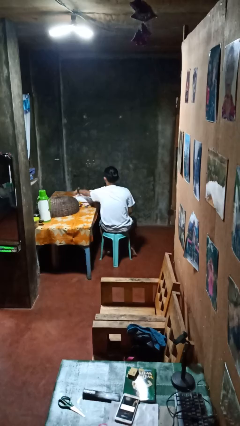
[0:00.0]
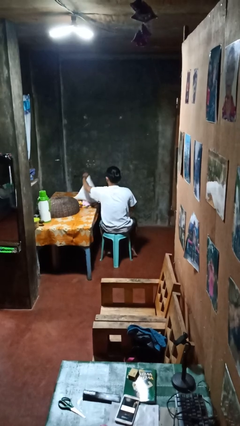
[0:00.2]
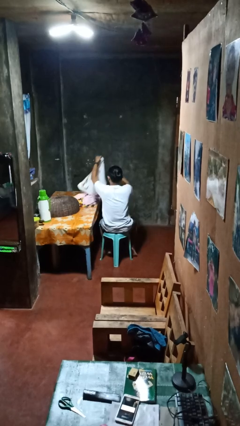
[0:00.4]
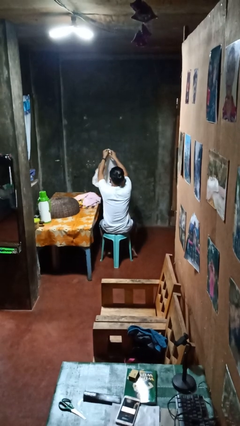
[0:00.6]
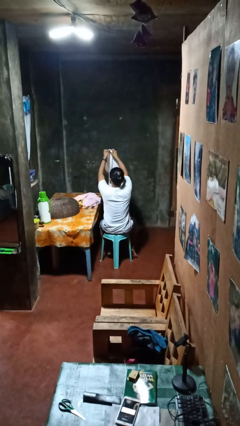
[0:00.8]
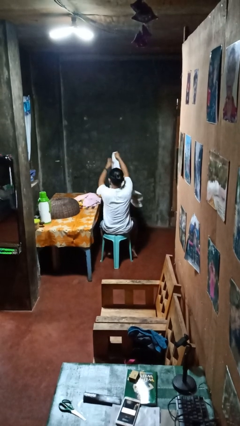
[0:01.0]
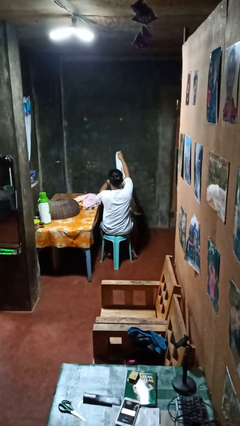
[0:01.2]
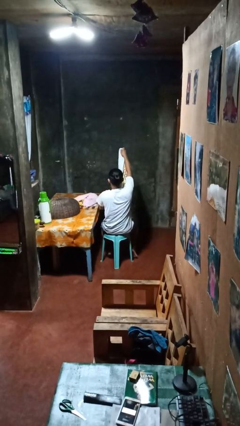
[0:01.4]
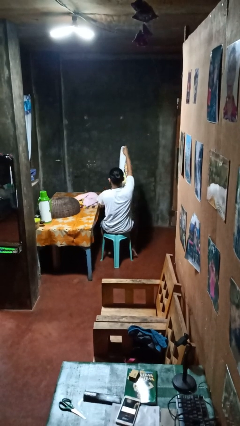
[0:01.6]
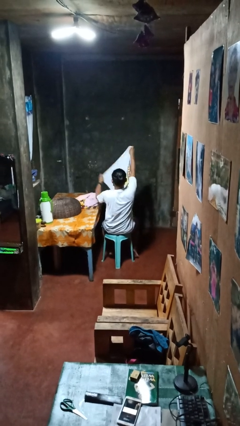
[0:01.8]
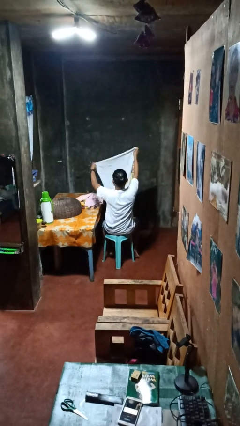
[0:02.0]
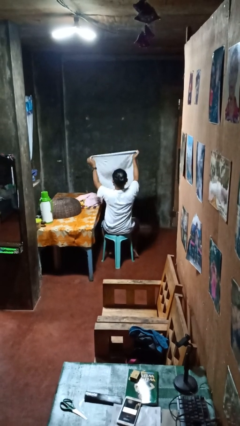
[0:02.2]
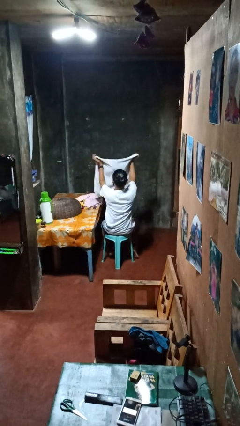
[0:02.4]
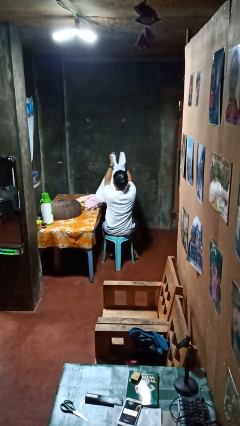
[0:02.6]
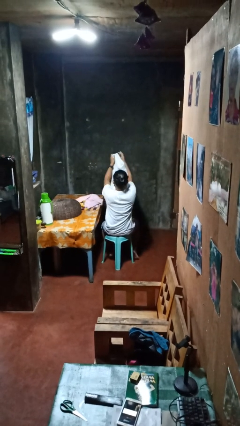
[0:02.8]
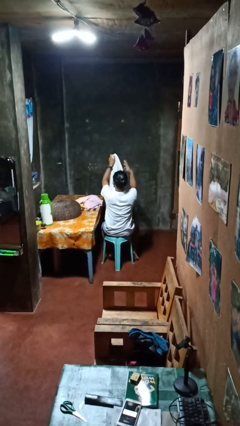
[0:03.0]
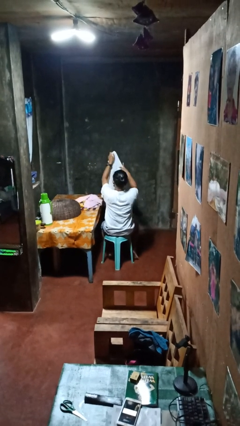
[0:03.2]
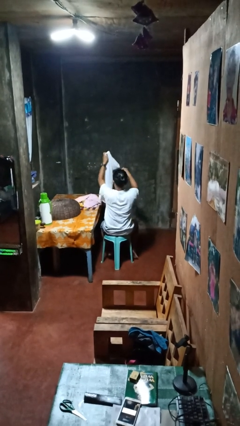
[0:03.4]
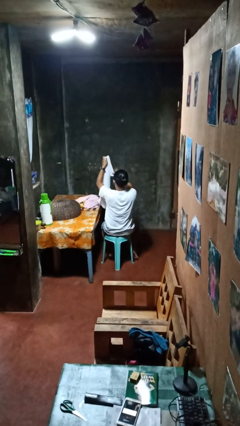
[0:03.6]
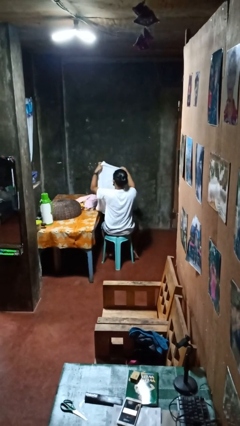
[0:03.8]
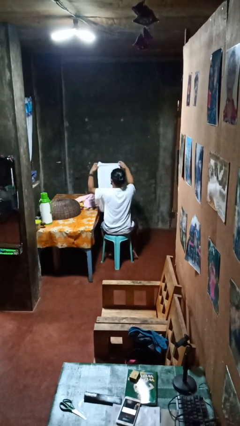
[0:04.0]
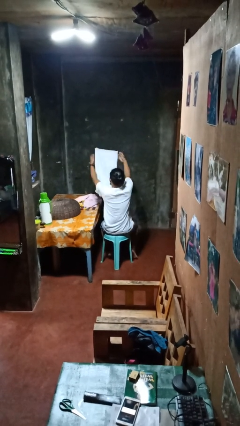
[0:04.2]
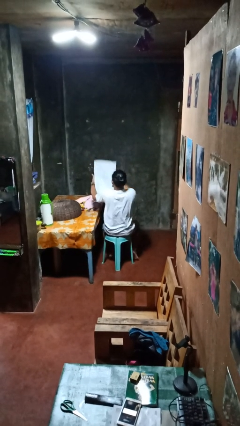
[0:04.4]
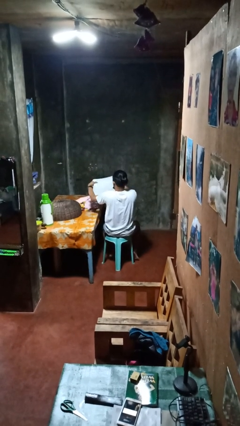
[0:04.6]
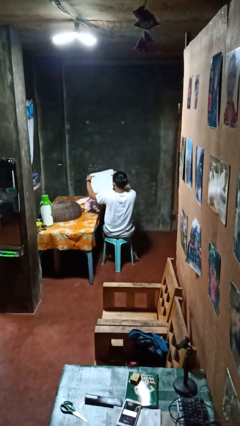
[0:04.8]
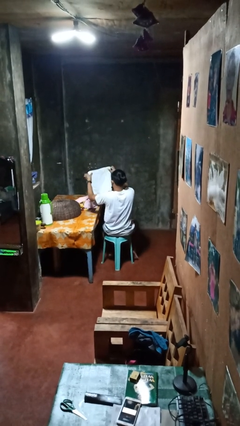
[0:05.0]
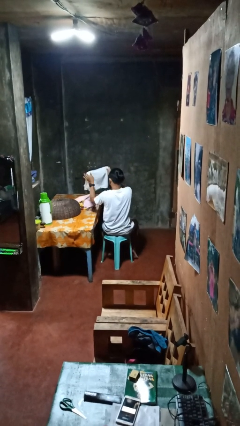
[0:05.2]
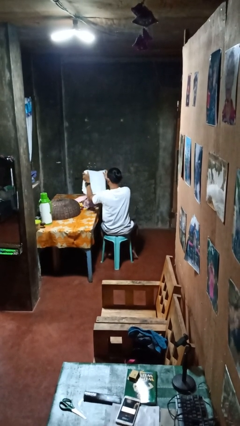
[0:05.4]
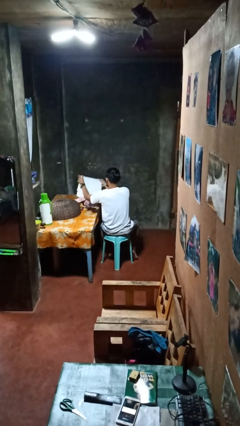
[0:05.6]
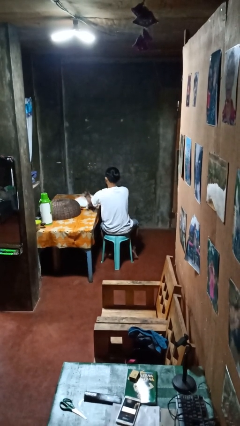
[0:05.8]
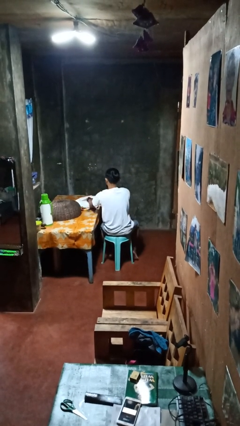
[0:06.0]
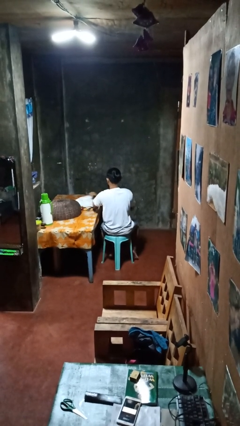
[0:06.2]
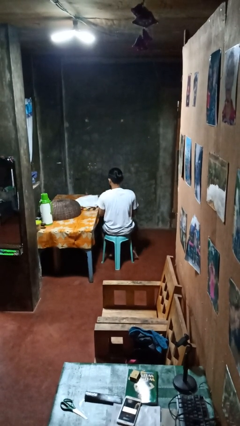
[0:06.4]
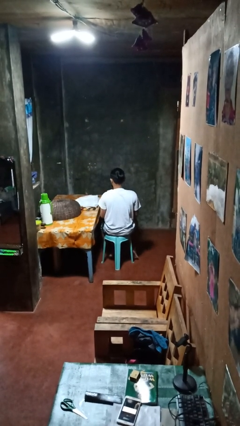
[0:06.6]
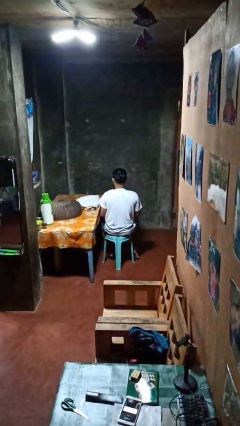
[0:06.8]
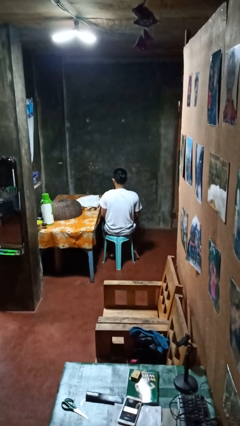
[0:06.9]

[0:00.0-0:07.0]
person folds towel

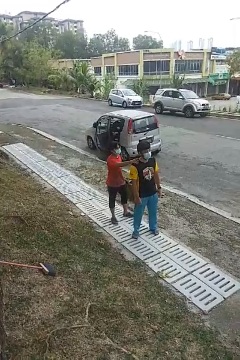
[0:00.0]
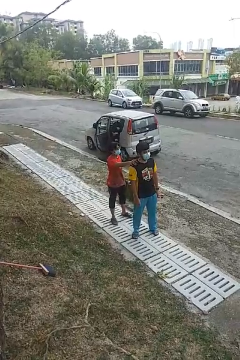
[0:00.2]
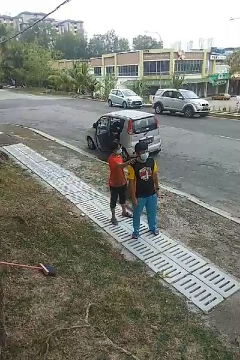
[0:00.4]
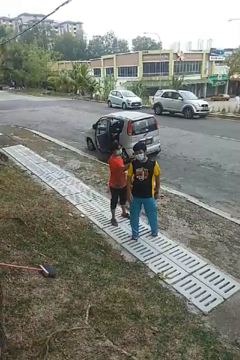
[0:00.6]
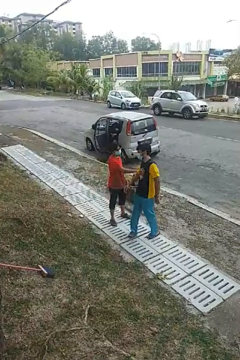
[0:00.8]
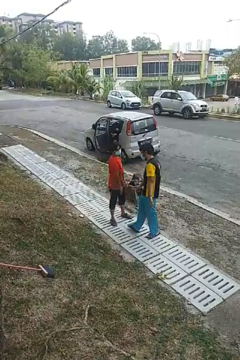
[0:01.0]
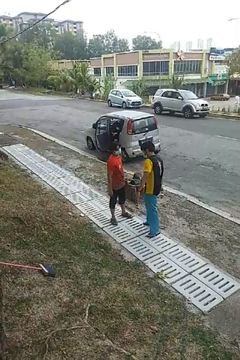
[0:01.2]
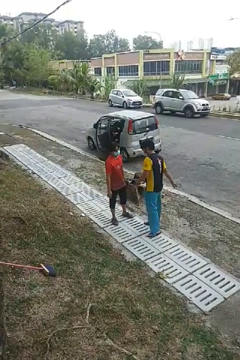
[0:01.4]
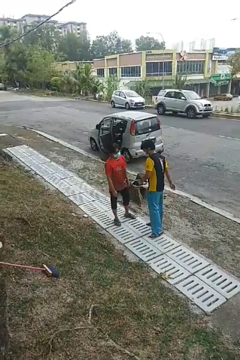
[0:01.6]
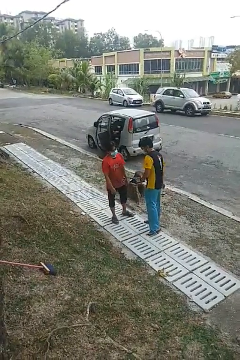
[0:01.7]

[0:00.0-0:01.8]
person spins person around

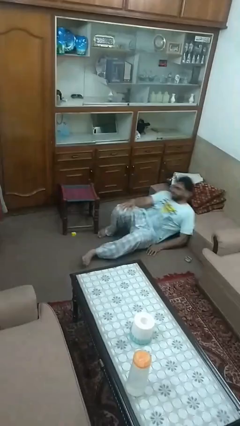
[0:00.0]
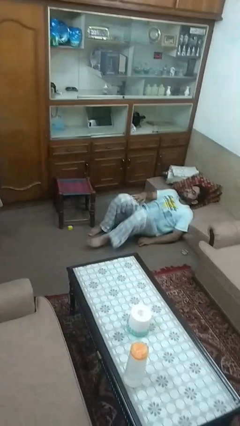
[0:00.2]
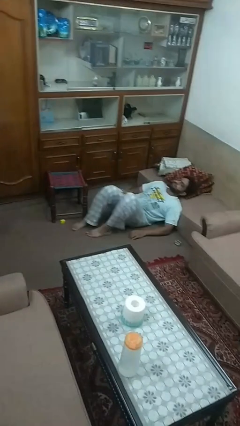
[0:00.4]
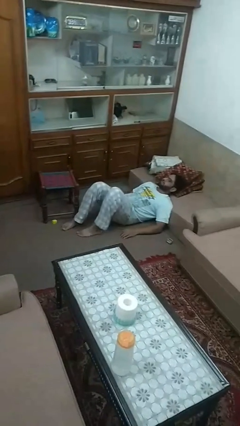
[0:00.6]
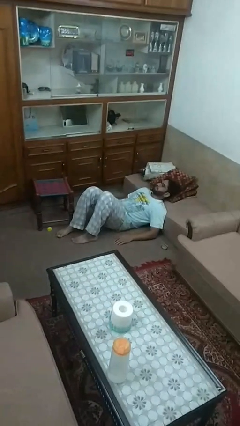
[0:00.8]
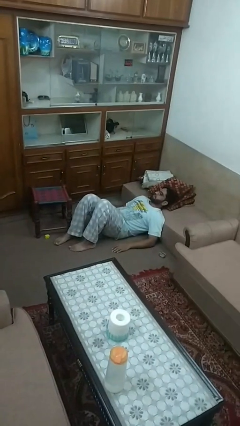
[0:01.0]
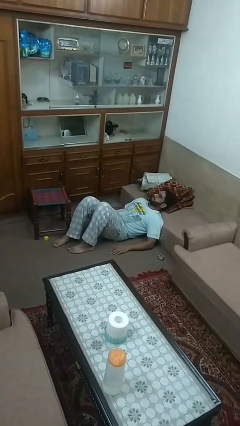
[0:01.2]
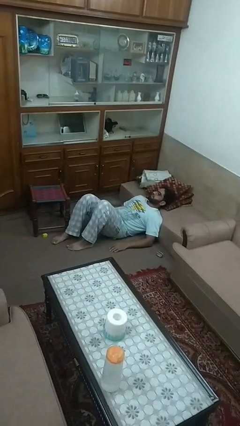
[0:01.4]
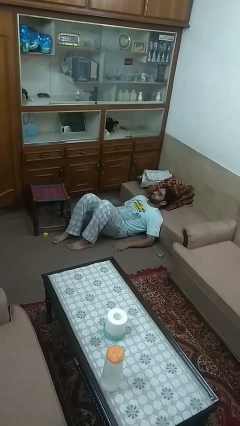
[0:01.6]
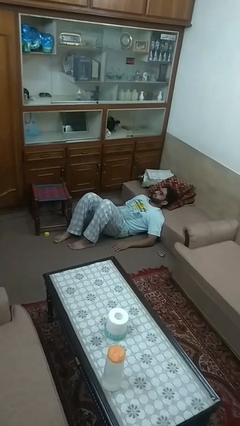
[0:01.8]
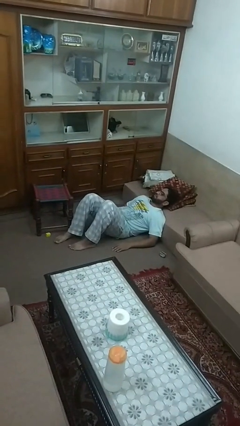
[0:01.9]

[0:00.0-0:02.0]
person lies down on floor

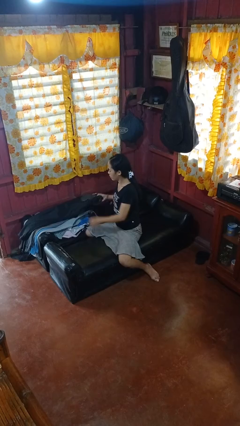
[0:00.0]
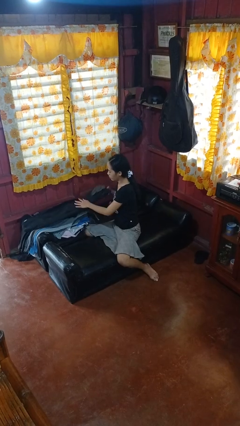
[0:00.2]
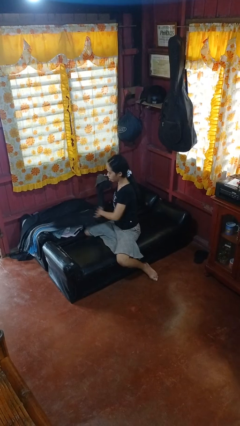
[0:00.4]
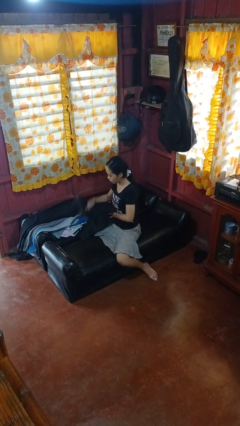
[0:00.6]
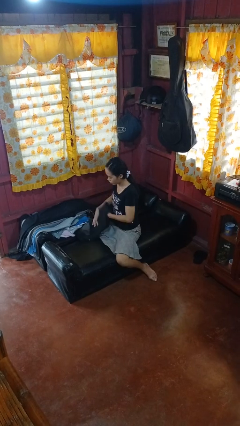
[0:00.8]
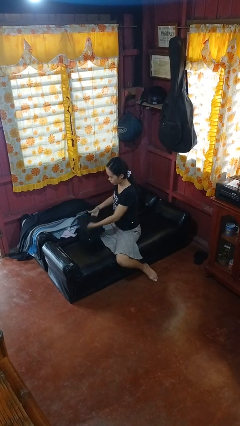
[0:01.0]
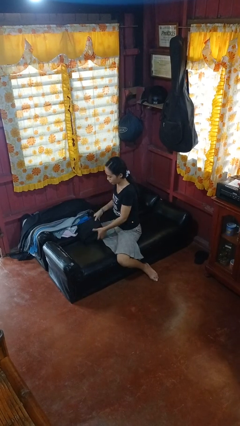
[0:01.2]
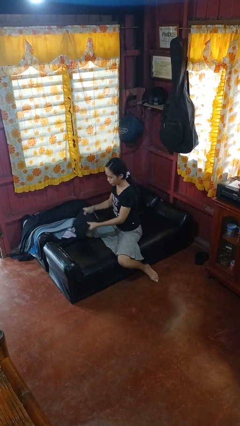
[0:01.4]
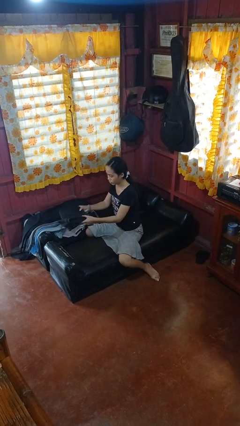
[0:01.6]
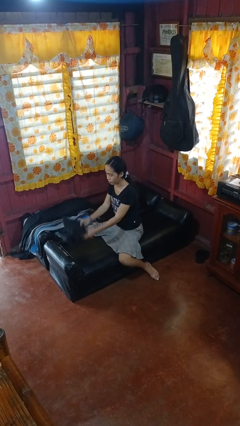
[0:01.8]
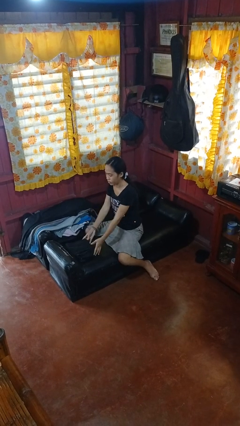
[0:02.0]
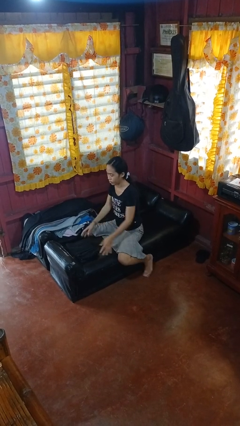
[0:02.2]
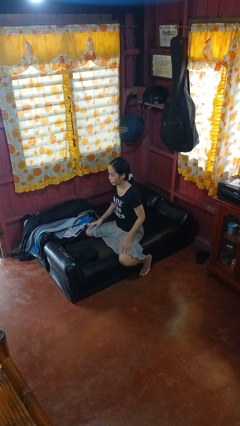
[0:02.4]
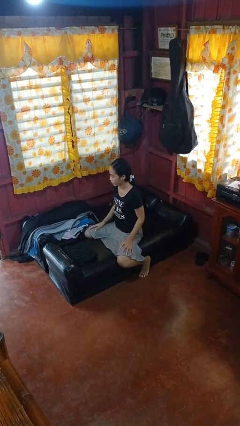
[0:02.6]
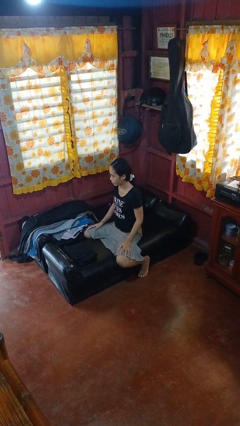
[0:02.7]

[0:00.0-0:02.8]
person folds pants

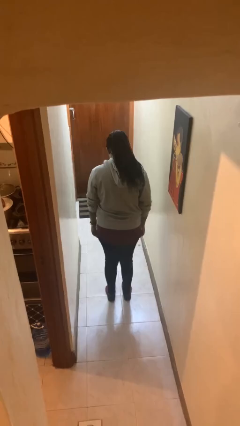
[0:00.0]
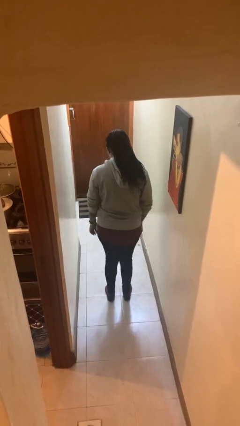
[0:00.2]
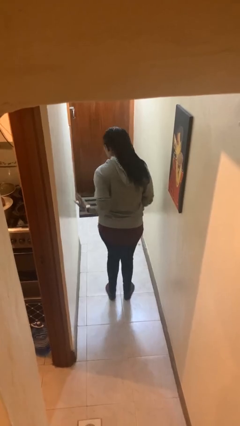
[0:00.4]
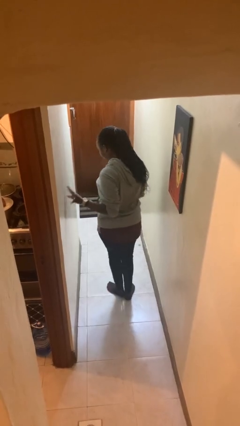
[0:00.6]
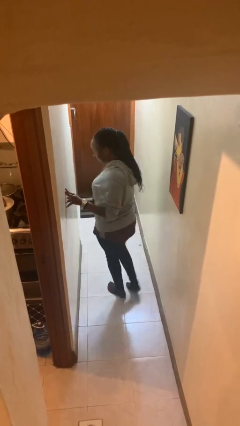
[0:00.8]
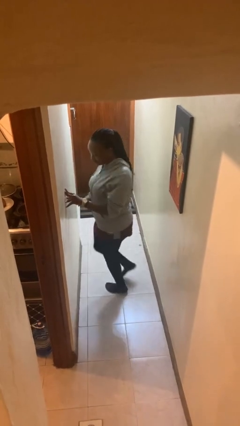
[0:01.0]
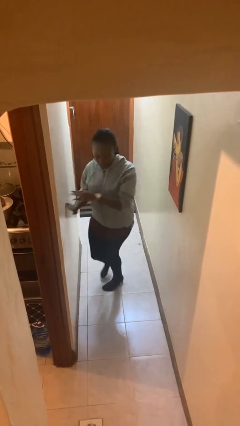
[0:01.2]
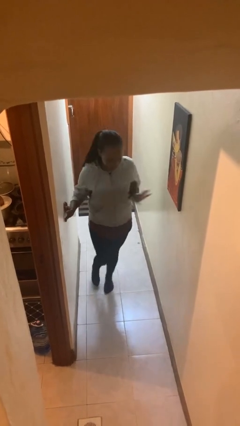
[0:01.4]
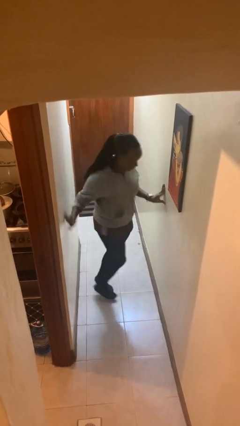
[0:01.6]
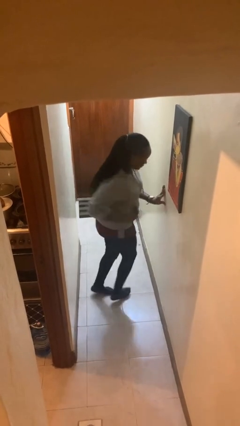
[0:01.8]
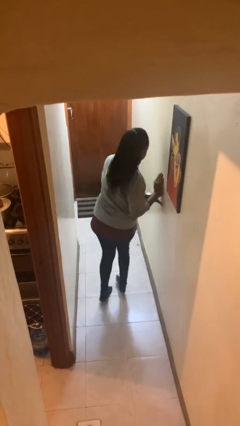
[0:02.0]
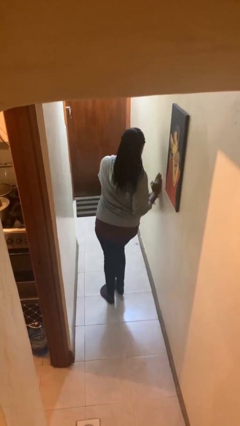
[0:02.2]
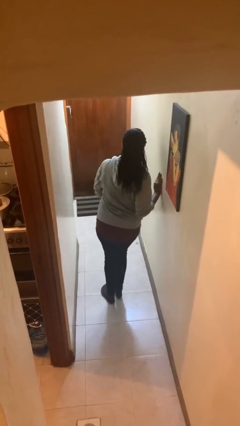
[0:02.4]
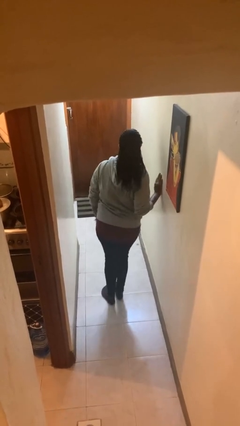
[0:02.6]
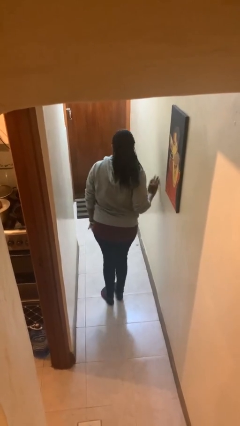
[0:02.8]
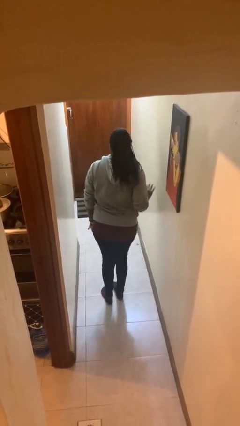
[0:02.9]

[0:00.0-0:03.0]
person twirls

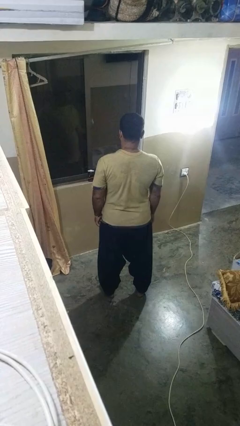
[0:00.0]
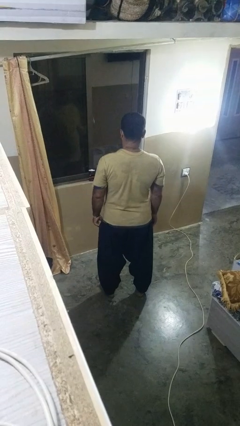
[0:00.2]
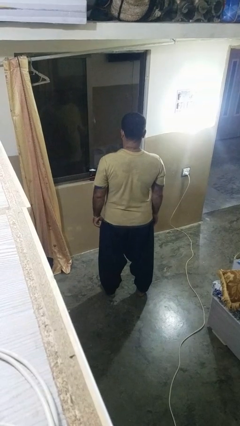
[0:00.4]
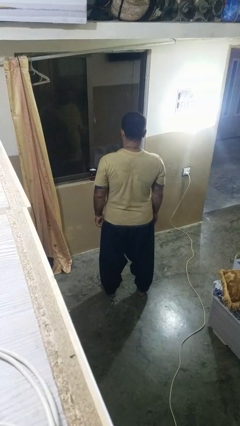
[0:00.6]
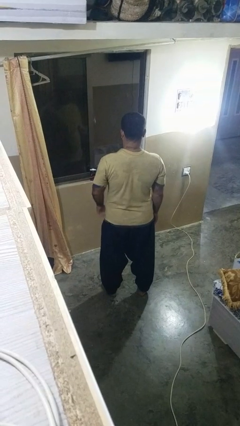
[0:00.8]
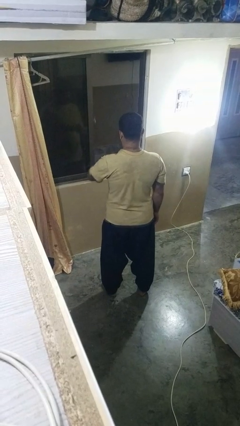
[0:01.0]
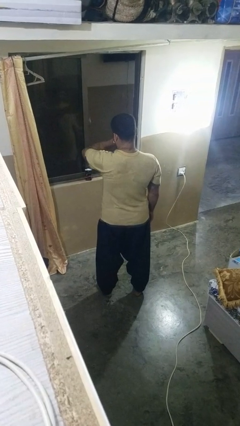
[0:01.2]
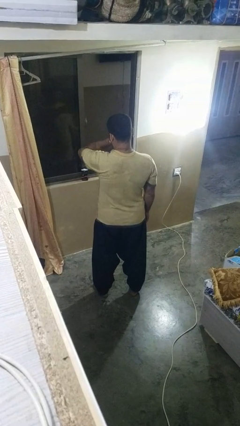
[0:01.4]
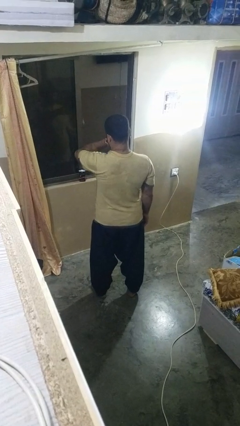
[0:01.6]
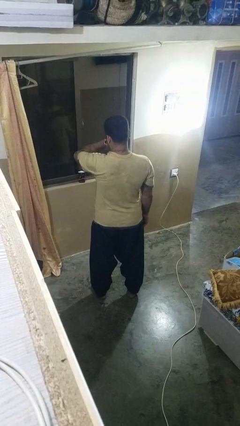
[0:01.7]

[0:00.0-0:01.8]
person looks at wristwatch
